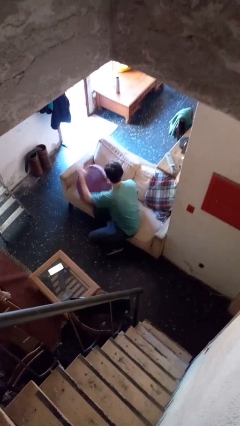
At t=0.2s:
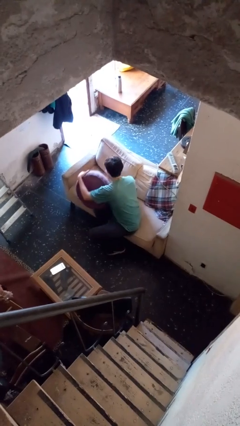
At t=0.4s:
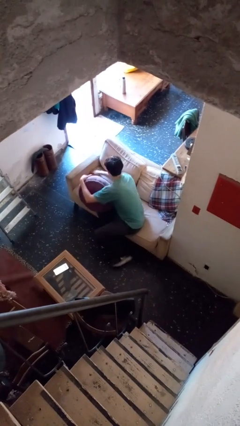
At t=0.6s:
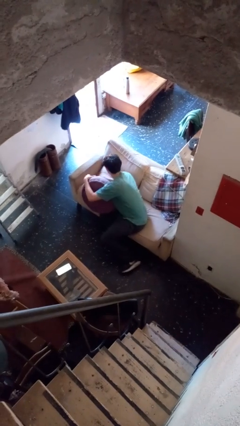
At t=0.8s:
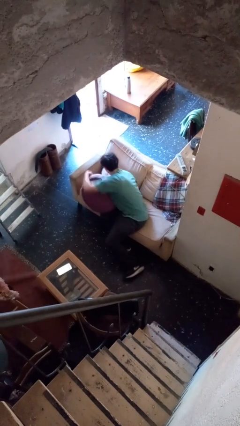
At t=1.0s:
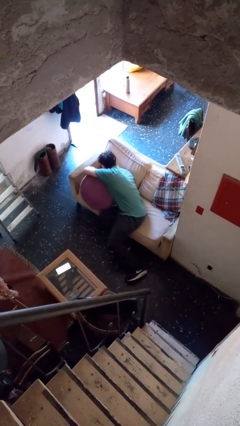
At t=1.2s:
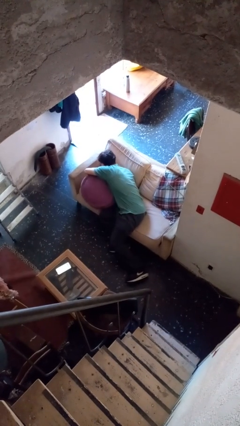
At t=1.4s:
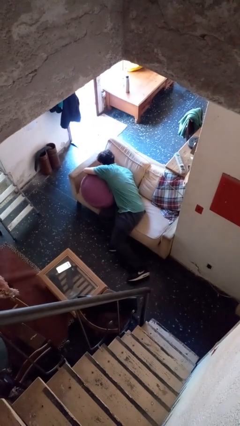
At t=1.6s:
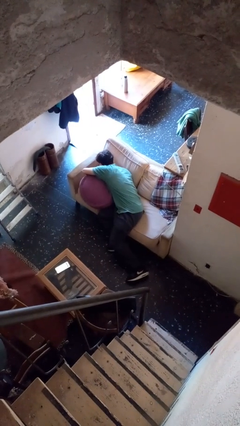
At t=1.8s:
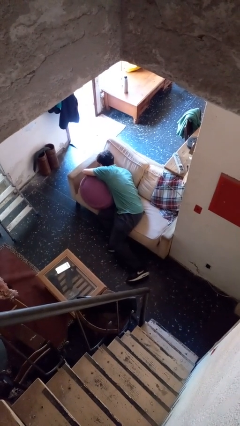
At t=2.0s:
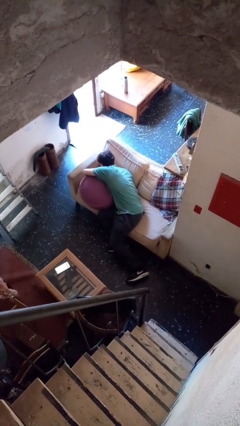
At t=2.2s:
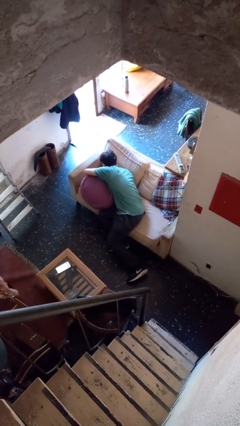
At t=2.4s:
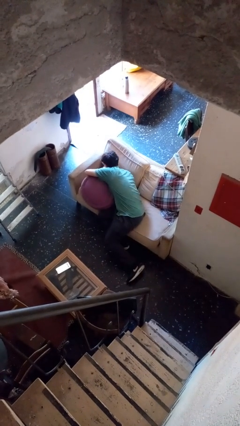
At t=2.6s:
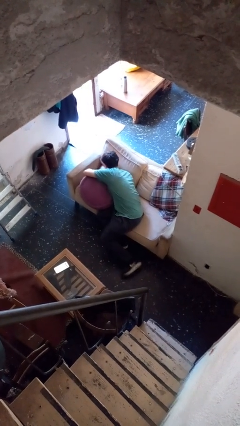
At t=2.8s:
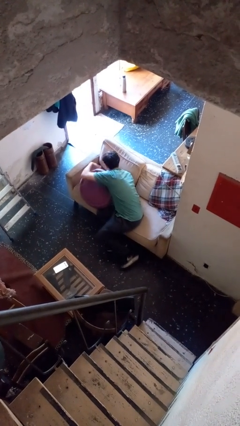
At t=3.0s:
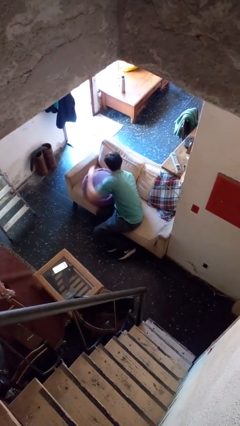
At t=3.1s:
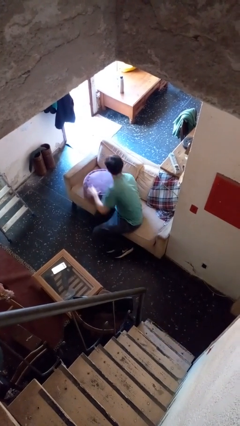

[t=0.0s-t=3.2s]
person searches in couch

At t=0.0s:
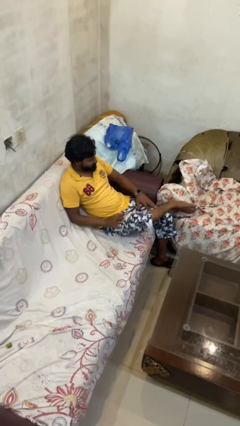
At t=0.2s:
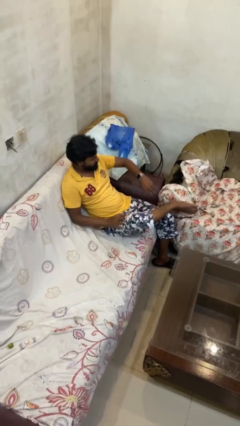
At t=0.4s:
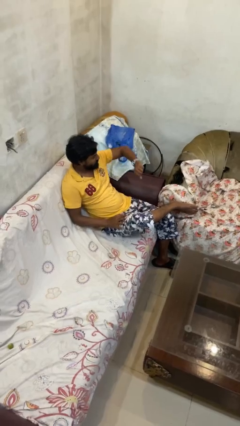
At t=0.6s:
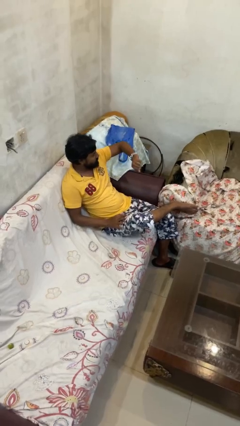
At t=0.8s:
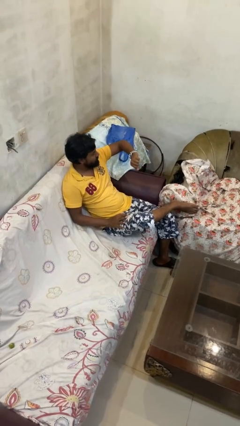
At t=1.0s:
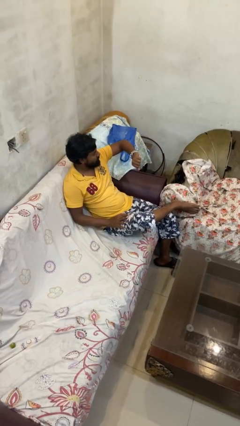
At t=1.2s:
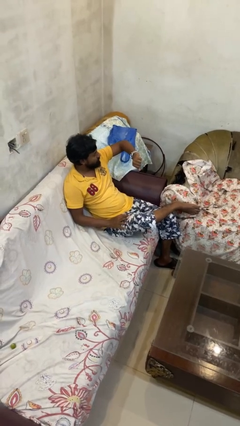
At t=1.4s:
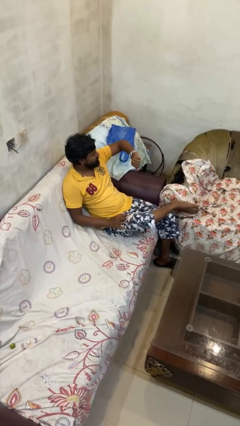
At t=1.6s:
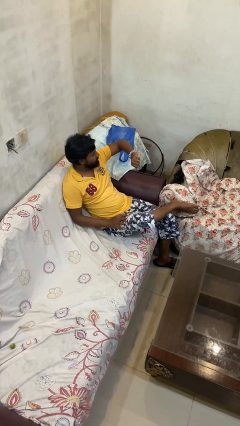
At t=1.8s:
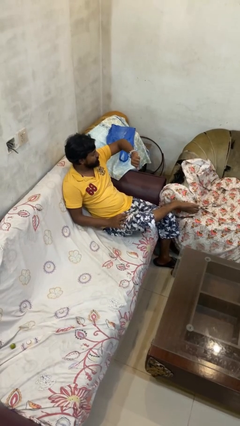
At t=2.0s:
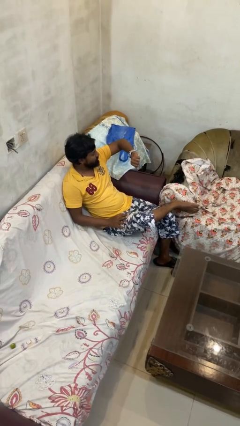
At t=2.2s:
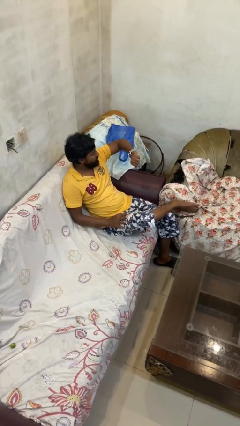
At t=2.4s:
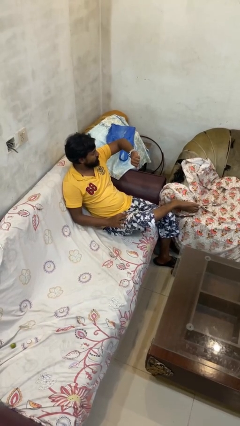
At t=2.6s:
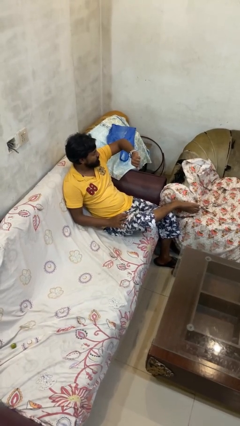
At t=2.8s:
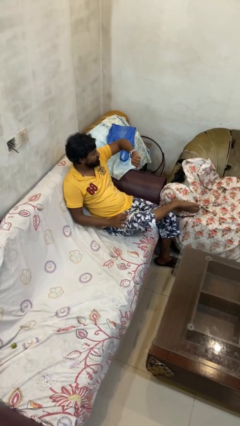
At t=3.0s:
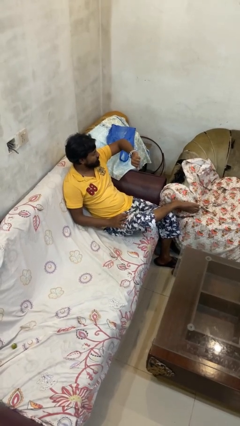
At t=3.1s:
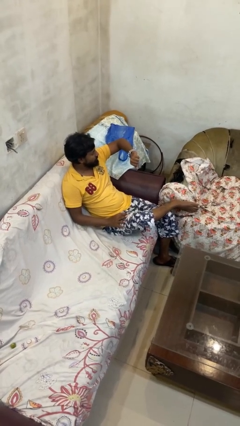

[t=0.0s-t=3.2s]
person looks at wristwatch

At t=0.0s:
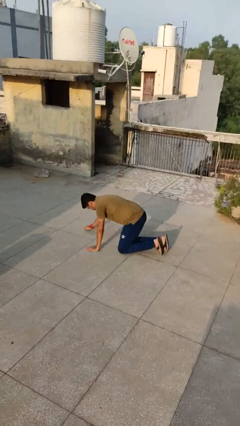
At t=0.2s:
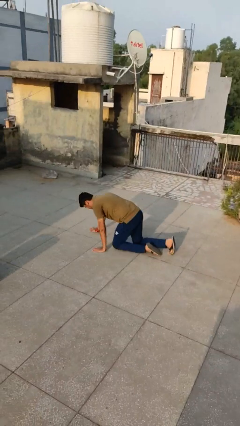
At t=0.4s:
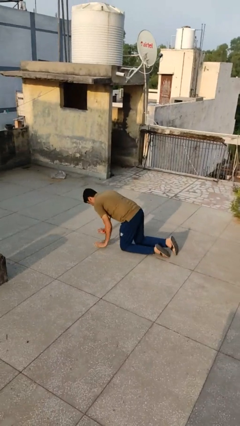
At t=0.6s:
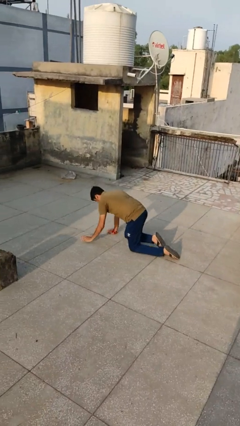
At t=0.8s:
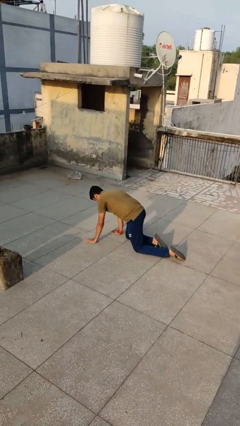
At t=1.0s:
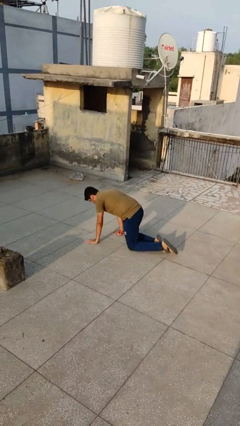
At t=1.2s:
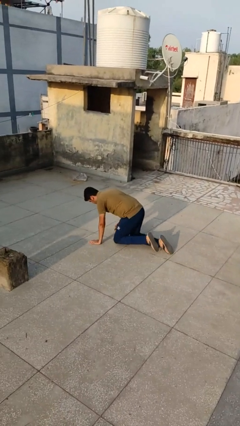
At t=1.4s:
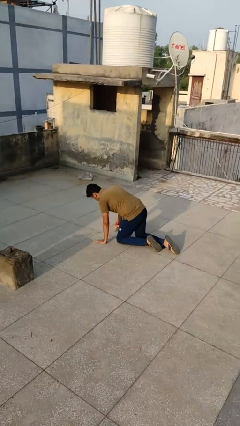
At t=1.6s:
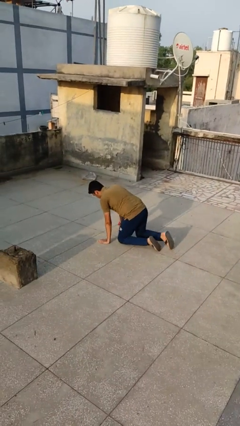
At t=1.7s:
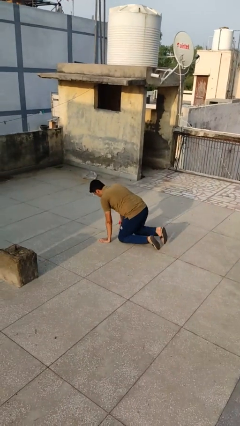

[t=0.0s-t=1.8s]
person crawls

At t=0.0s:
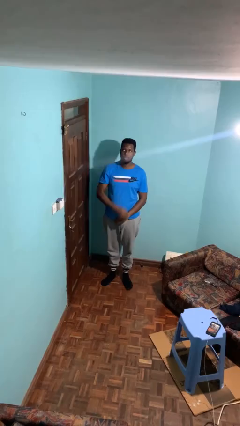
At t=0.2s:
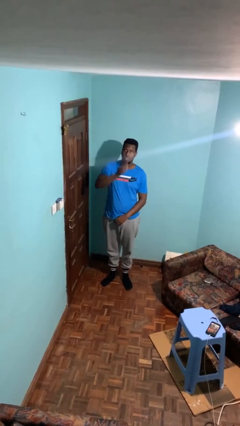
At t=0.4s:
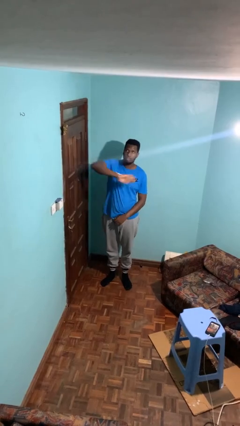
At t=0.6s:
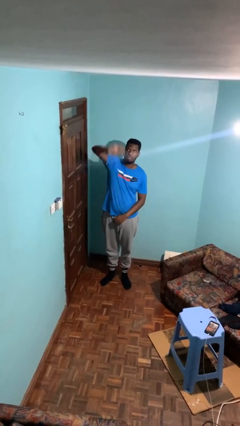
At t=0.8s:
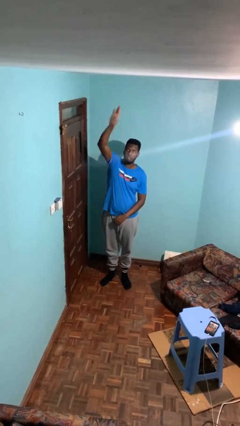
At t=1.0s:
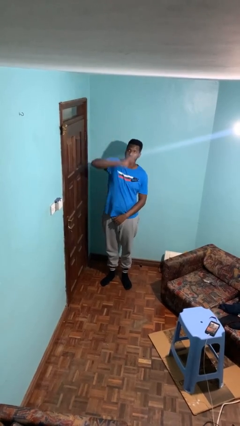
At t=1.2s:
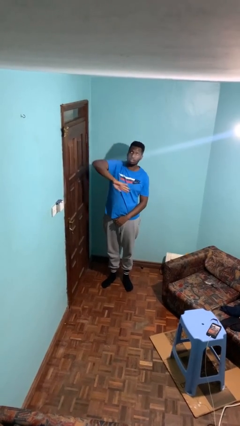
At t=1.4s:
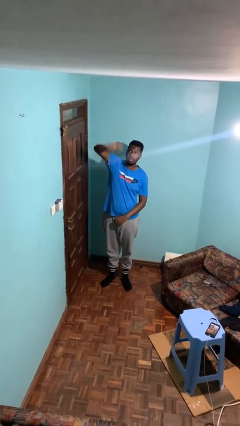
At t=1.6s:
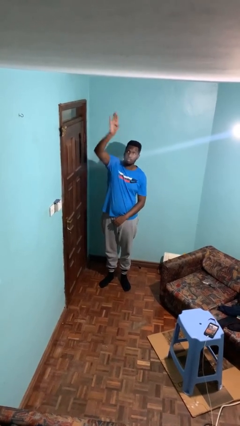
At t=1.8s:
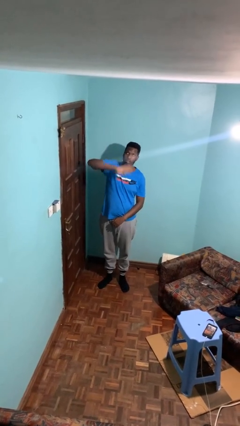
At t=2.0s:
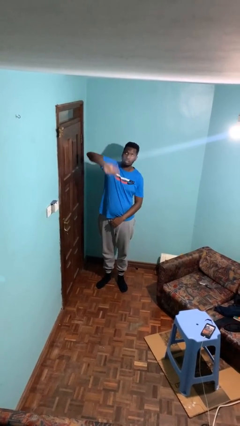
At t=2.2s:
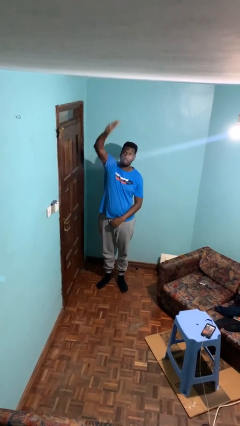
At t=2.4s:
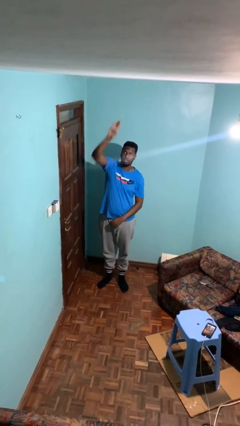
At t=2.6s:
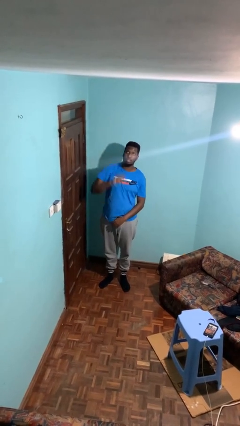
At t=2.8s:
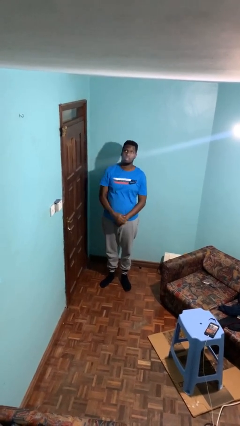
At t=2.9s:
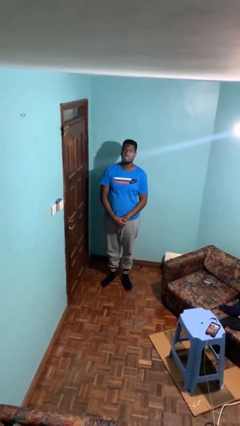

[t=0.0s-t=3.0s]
person gestures swipe up

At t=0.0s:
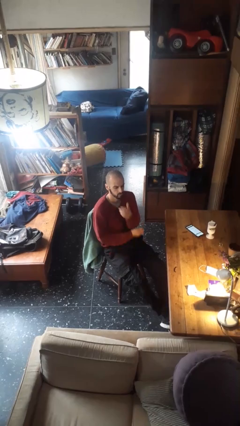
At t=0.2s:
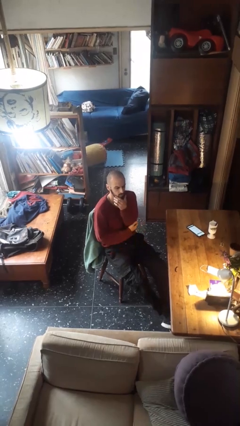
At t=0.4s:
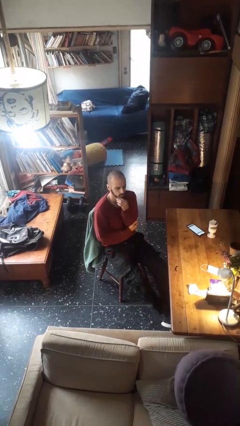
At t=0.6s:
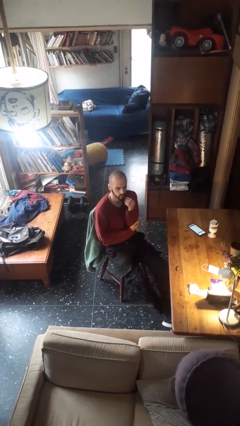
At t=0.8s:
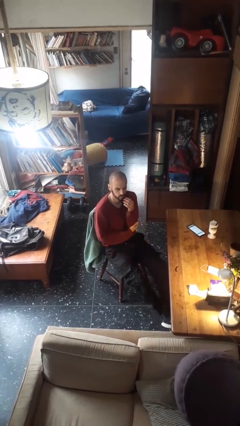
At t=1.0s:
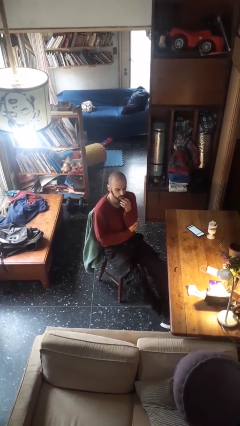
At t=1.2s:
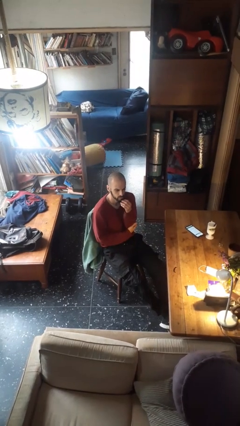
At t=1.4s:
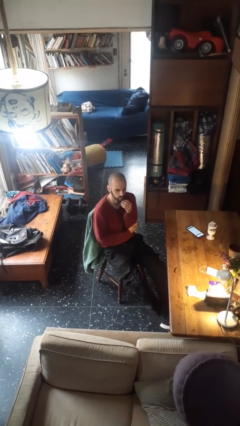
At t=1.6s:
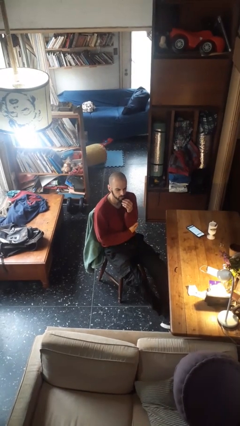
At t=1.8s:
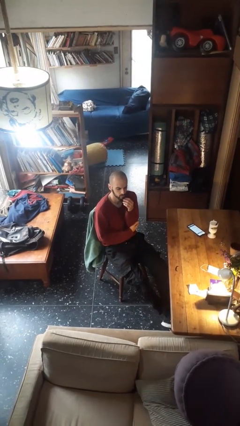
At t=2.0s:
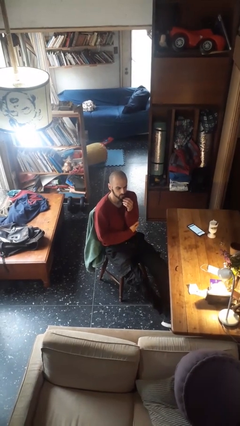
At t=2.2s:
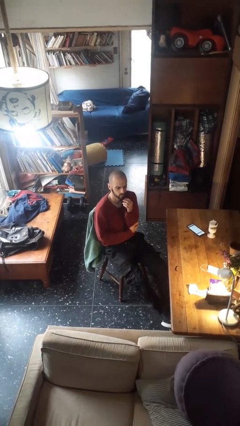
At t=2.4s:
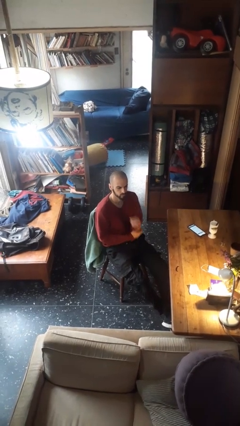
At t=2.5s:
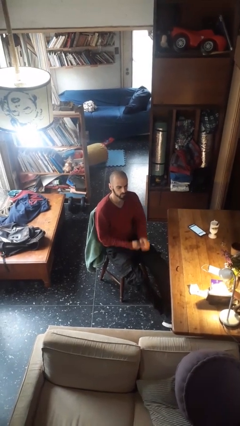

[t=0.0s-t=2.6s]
person strokes chin

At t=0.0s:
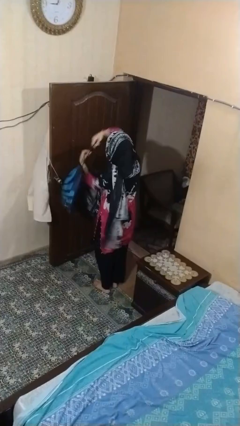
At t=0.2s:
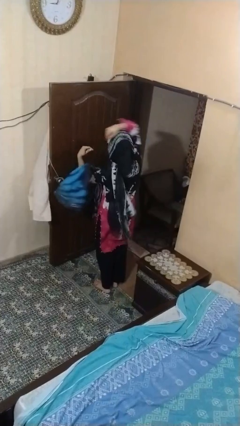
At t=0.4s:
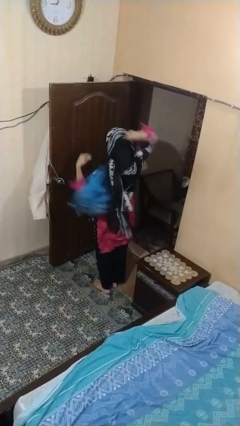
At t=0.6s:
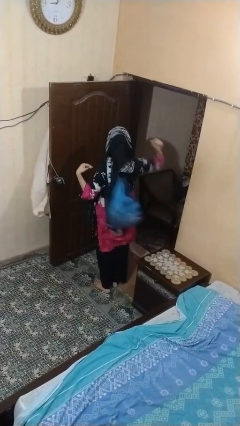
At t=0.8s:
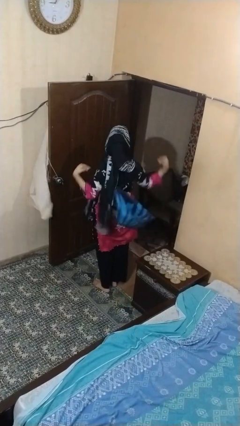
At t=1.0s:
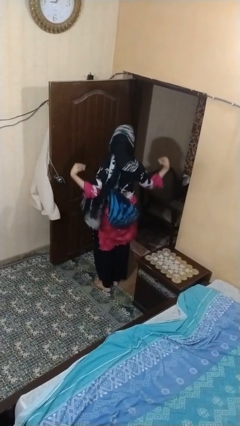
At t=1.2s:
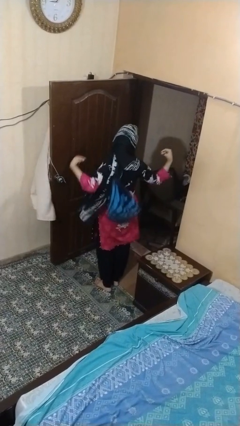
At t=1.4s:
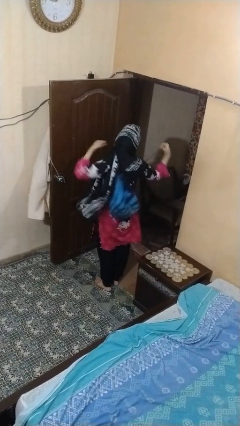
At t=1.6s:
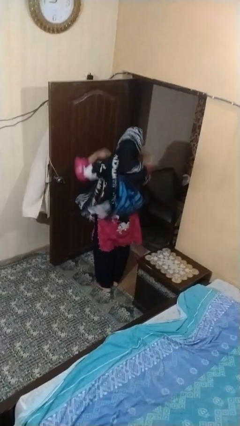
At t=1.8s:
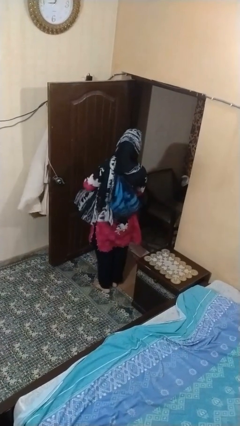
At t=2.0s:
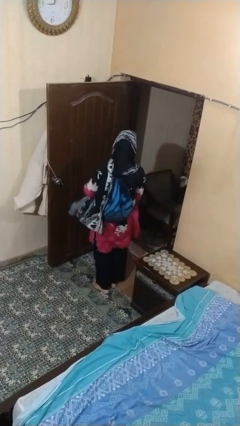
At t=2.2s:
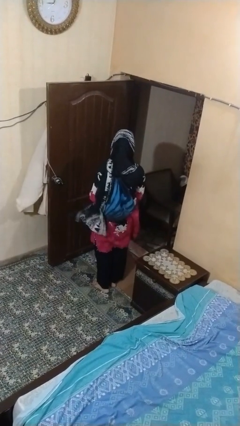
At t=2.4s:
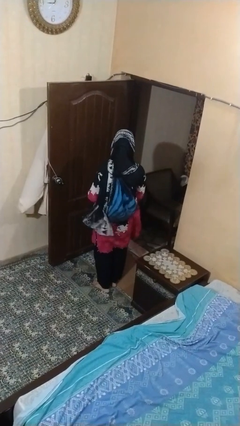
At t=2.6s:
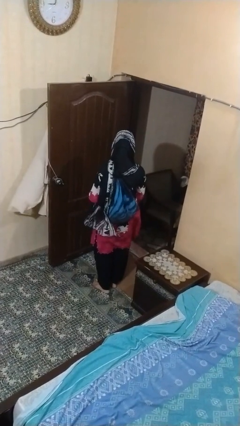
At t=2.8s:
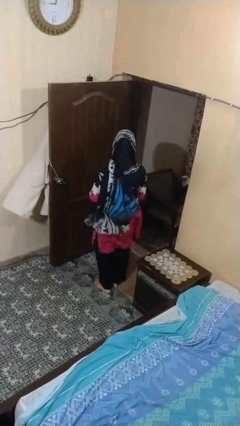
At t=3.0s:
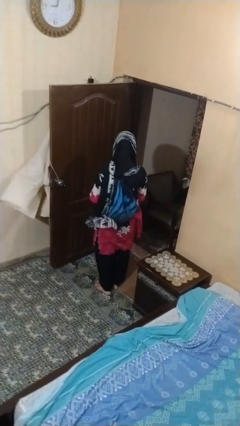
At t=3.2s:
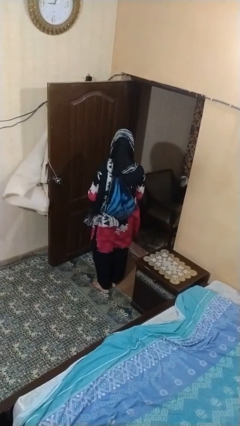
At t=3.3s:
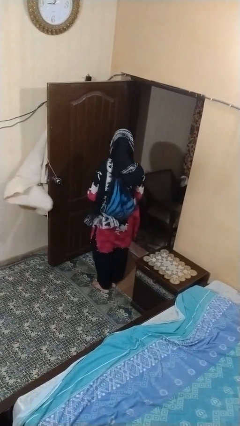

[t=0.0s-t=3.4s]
person puts on backpack

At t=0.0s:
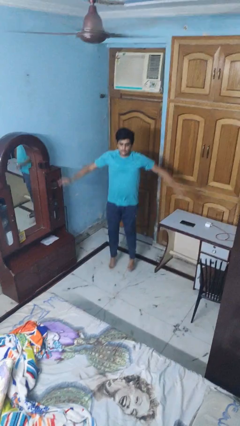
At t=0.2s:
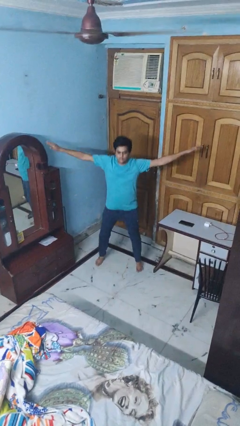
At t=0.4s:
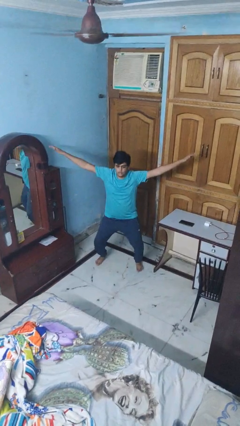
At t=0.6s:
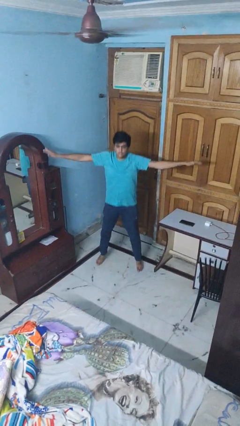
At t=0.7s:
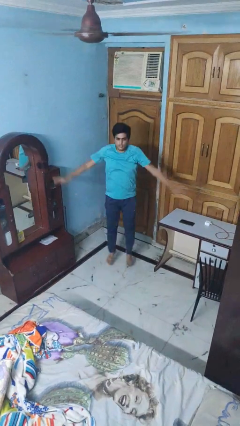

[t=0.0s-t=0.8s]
person exercises with jumping jacks
